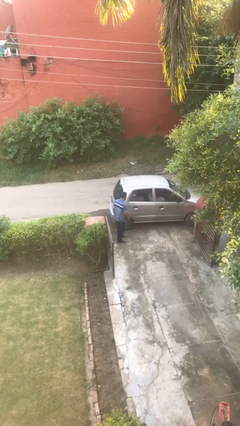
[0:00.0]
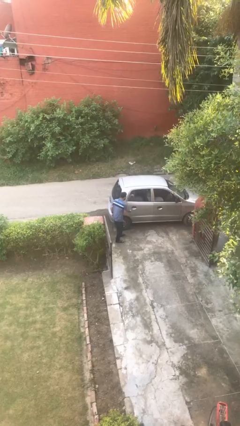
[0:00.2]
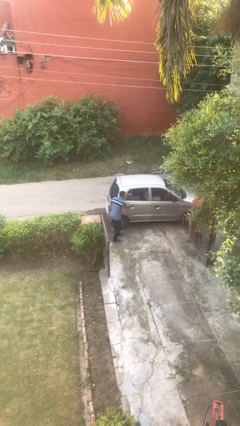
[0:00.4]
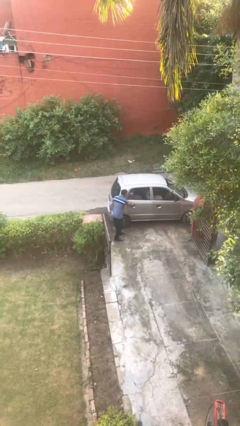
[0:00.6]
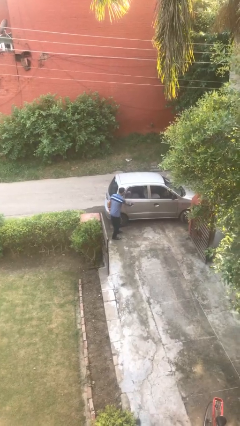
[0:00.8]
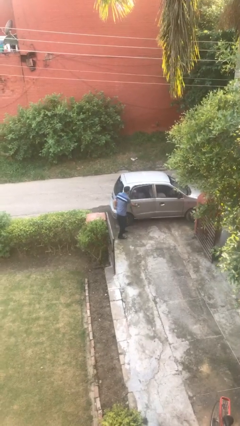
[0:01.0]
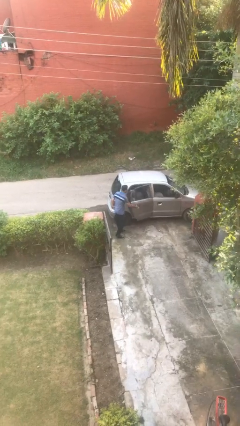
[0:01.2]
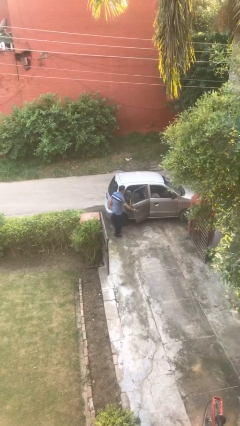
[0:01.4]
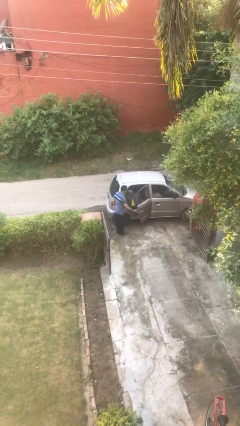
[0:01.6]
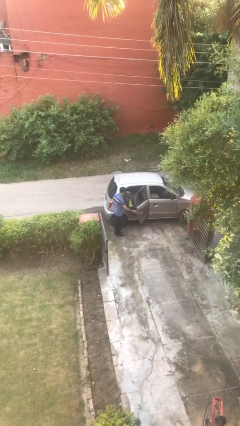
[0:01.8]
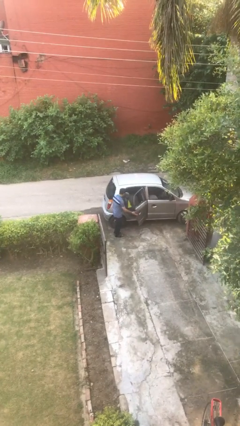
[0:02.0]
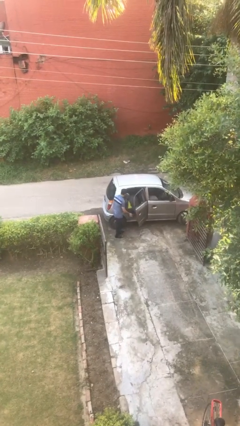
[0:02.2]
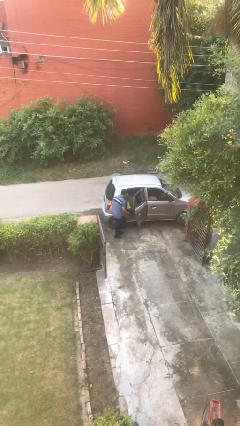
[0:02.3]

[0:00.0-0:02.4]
person opens car door

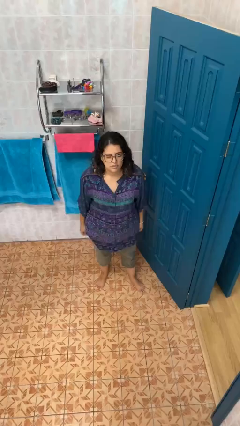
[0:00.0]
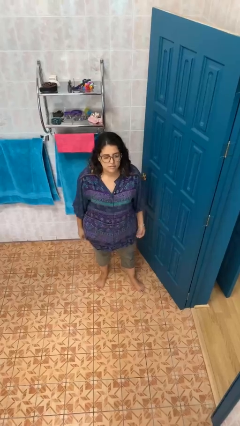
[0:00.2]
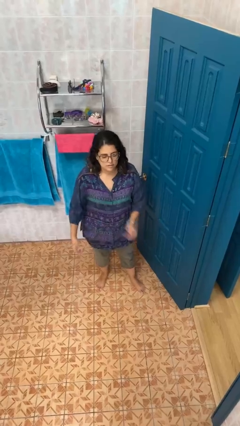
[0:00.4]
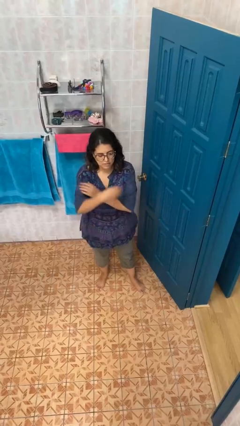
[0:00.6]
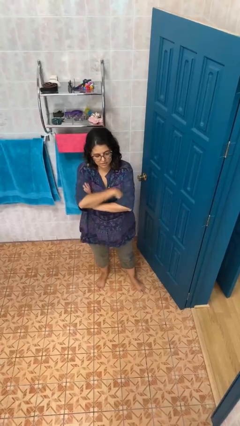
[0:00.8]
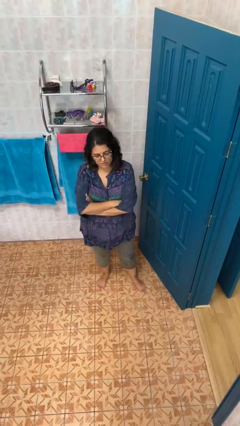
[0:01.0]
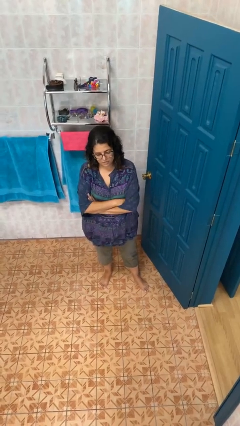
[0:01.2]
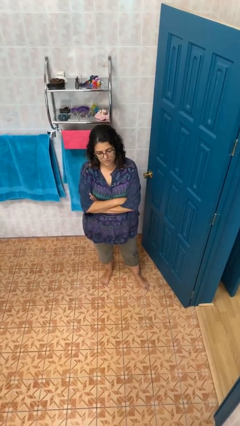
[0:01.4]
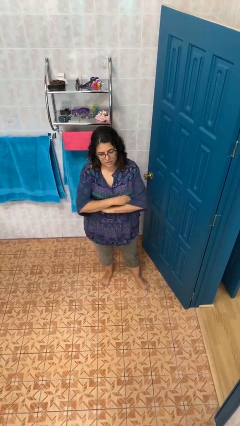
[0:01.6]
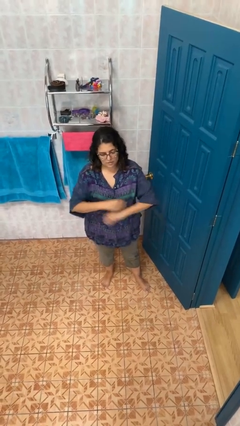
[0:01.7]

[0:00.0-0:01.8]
person crosses arms

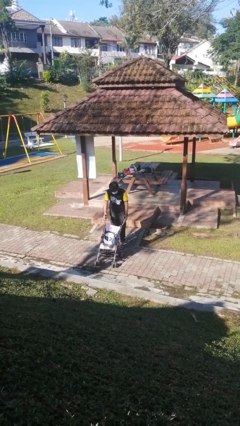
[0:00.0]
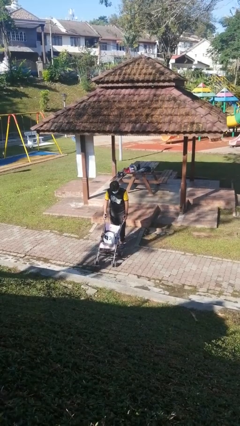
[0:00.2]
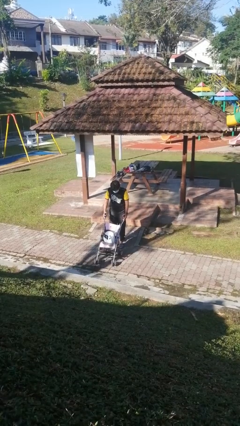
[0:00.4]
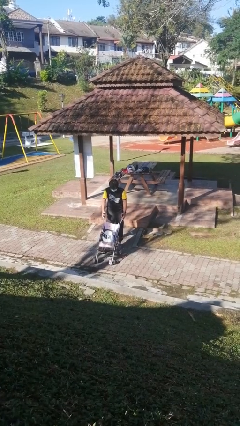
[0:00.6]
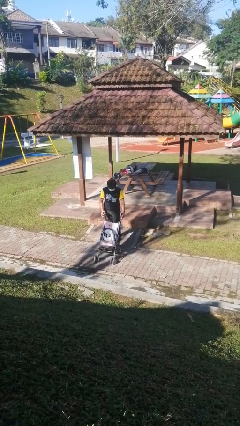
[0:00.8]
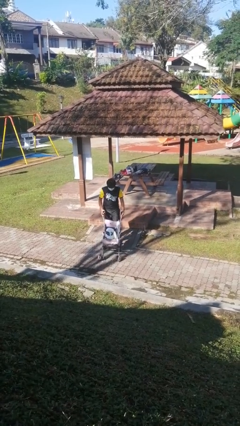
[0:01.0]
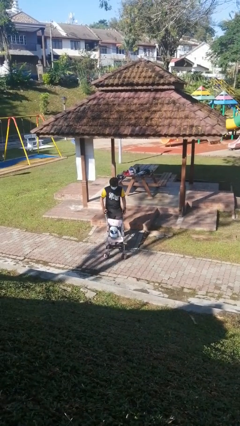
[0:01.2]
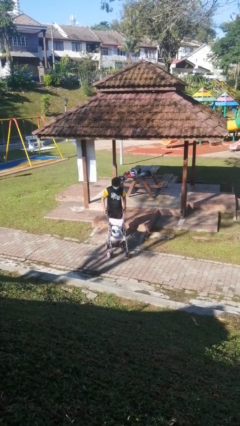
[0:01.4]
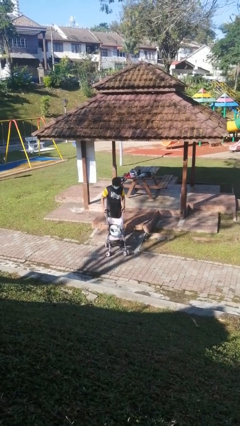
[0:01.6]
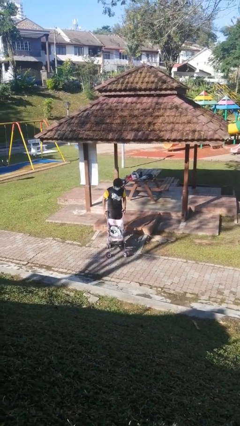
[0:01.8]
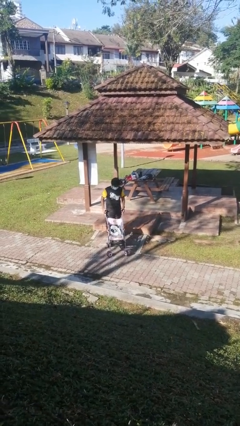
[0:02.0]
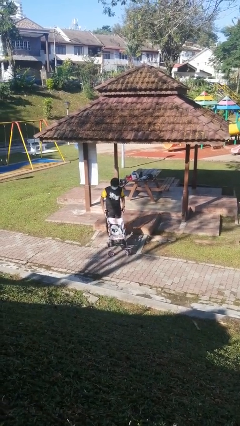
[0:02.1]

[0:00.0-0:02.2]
person pulls wheeled cart

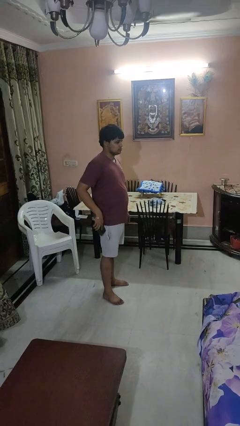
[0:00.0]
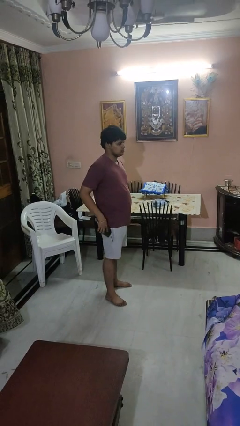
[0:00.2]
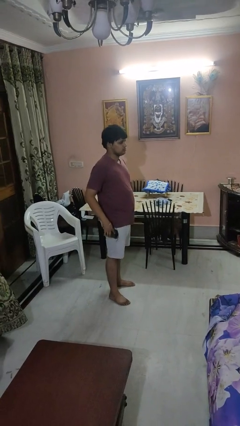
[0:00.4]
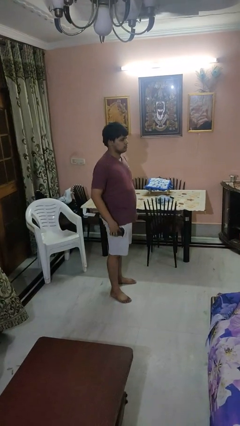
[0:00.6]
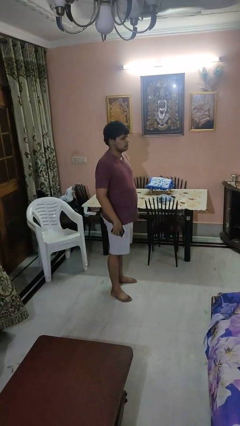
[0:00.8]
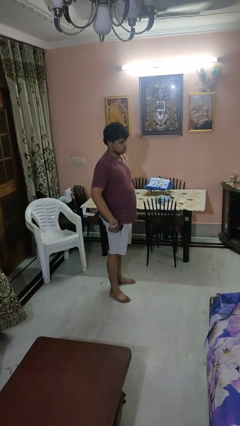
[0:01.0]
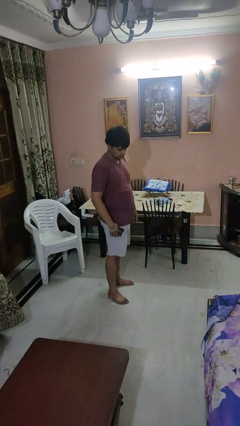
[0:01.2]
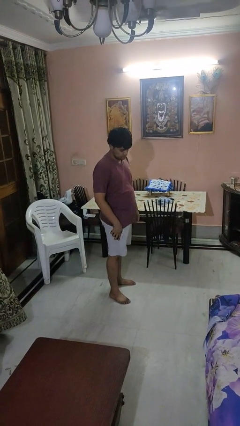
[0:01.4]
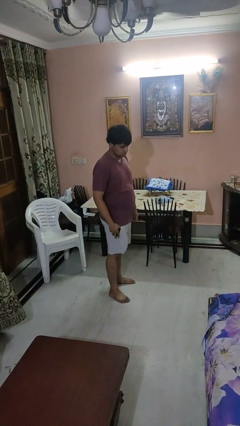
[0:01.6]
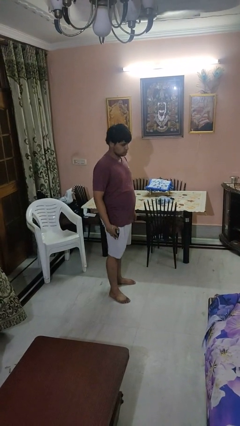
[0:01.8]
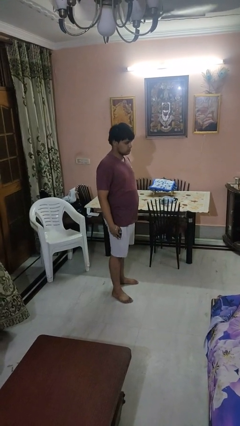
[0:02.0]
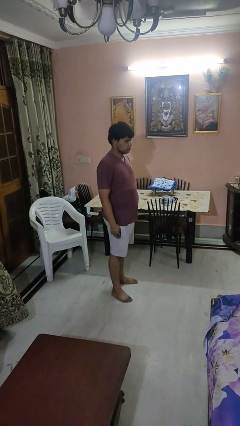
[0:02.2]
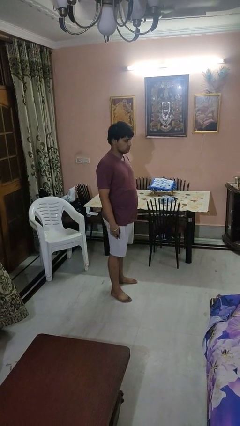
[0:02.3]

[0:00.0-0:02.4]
person puts phone into pocket

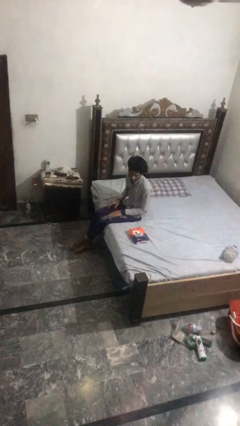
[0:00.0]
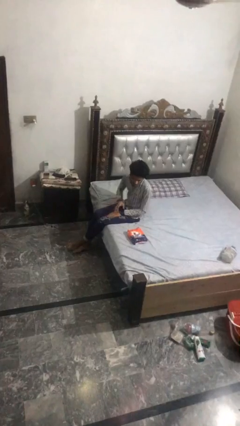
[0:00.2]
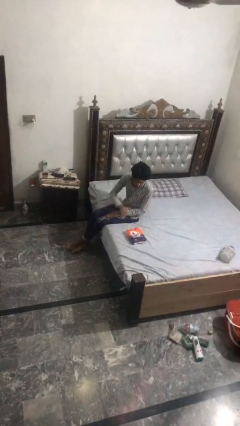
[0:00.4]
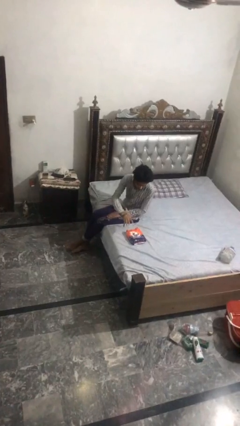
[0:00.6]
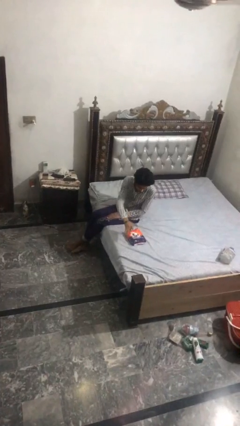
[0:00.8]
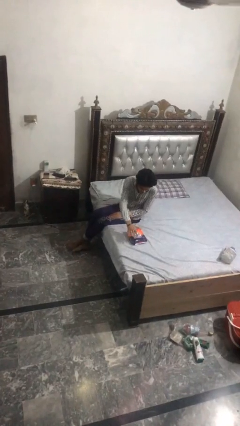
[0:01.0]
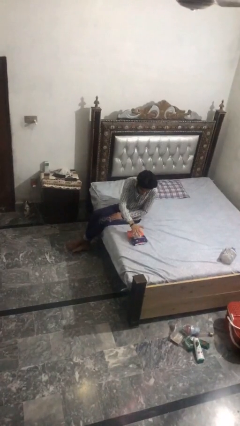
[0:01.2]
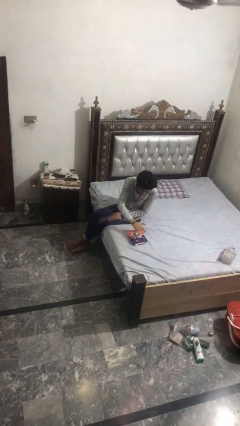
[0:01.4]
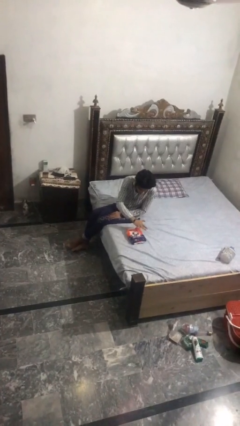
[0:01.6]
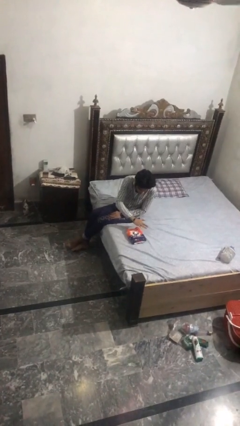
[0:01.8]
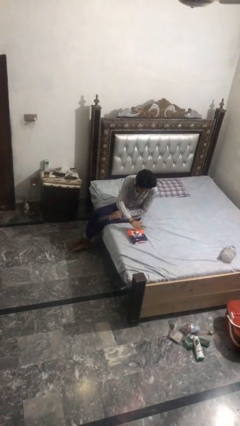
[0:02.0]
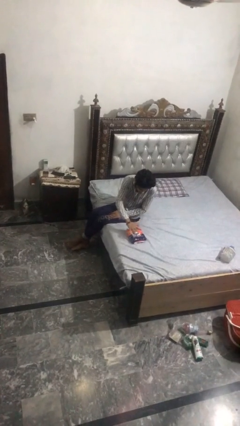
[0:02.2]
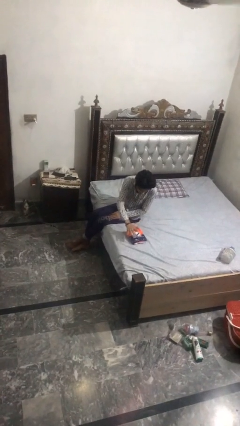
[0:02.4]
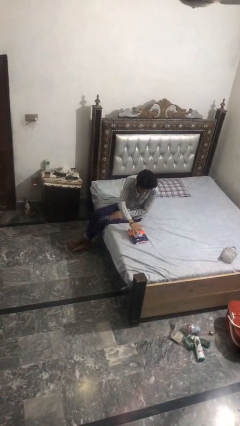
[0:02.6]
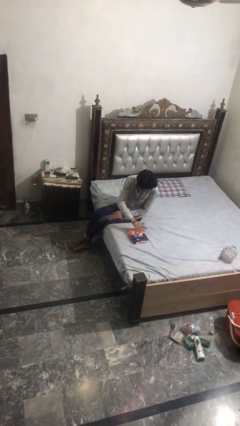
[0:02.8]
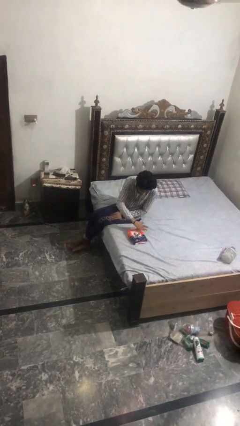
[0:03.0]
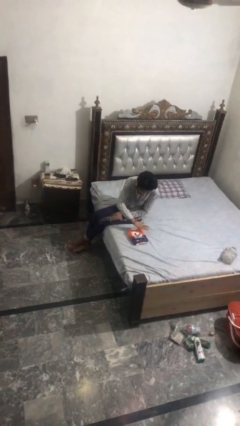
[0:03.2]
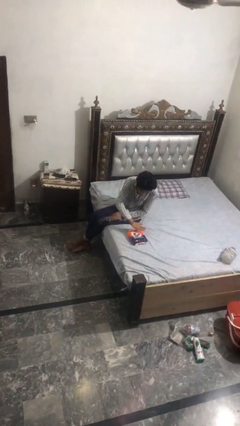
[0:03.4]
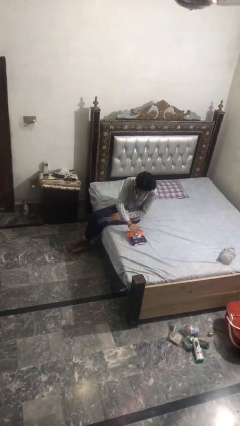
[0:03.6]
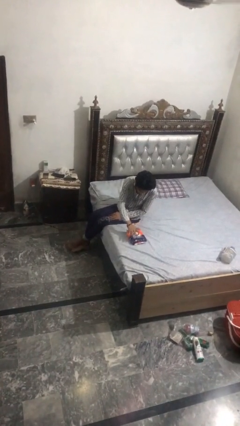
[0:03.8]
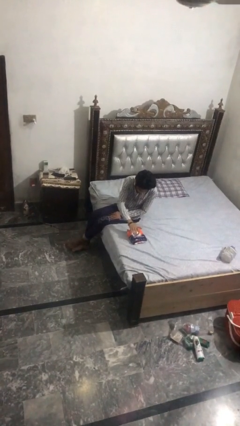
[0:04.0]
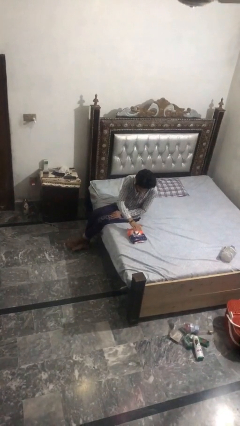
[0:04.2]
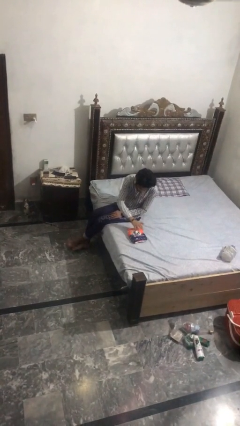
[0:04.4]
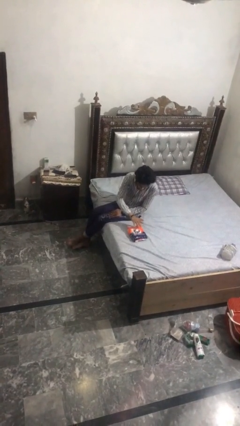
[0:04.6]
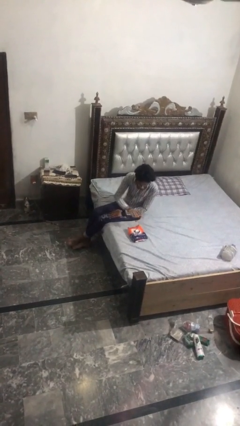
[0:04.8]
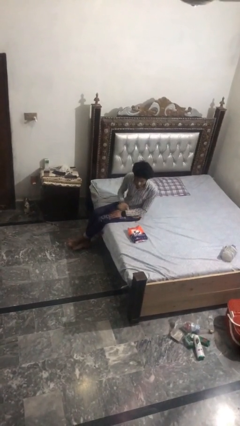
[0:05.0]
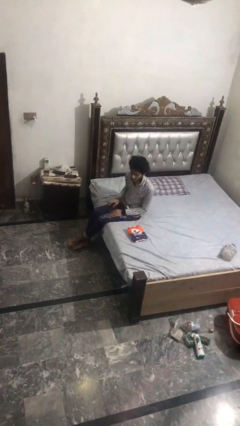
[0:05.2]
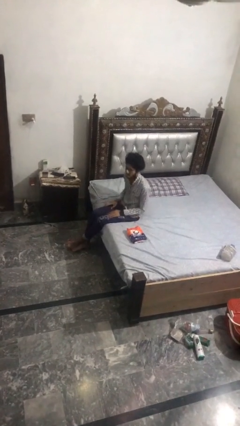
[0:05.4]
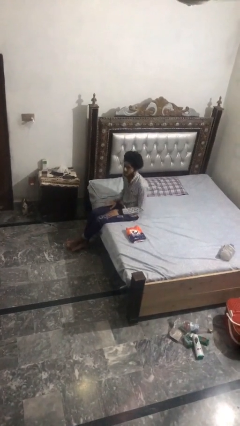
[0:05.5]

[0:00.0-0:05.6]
person waves hand over object

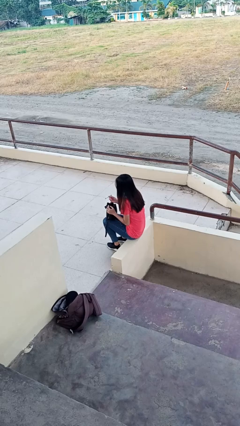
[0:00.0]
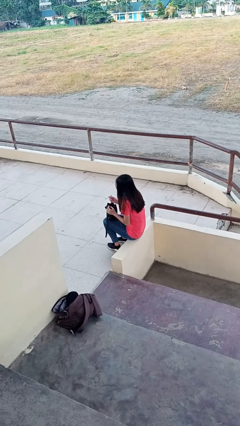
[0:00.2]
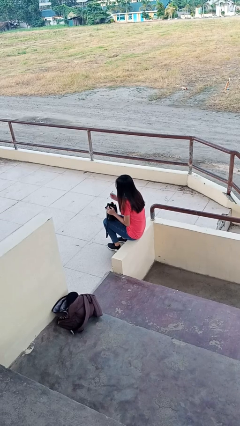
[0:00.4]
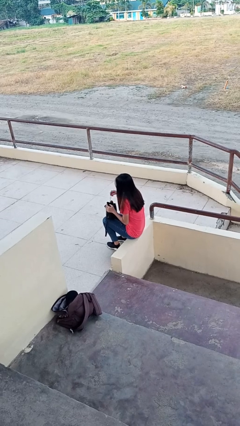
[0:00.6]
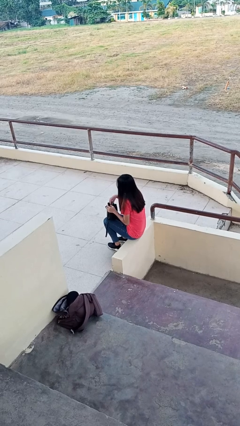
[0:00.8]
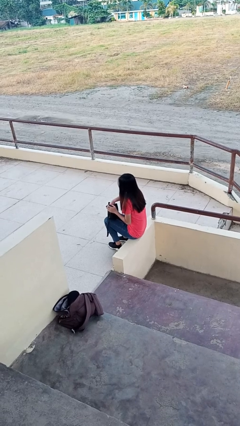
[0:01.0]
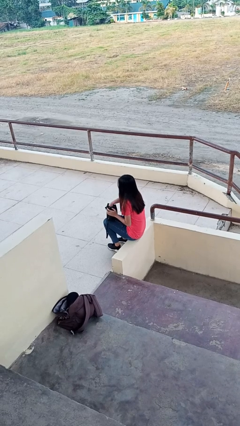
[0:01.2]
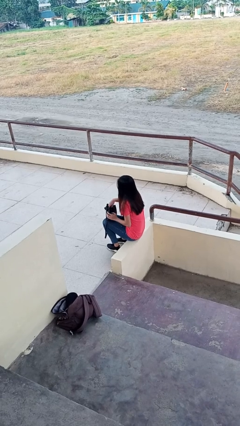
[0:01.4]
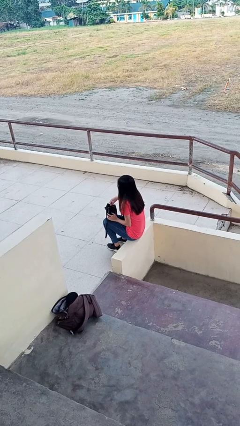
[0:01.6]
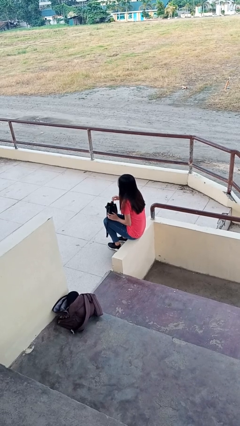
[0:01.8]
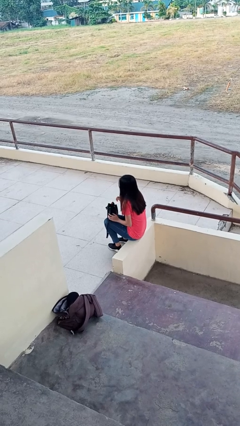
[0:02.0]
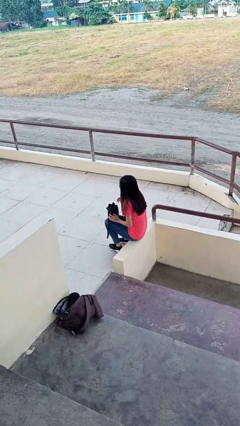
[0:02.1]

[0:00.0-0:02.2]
person puts object into purse
